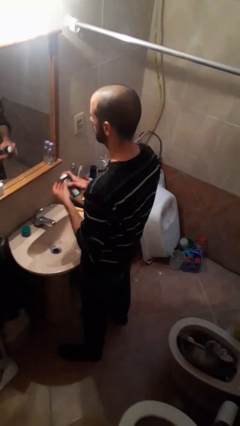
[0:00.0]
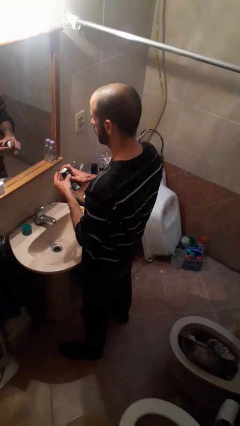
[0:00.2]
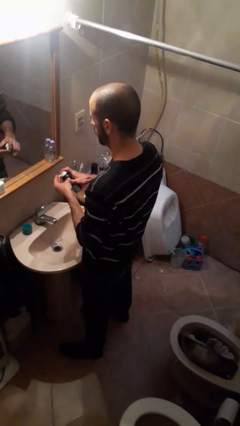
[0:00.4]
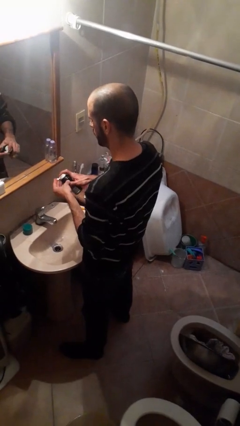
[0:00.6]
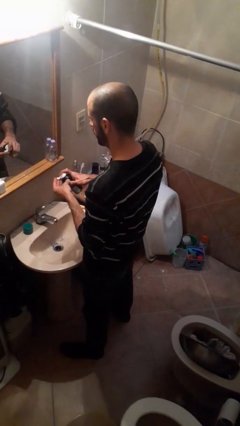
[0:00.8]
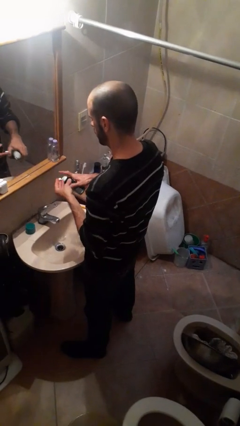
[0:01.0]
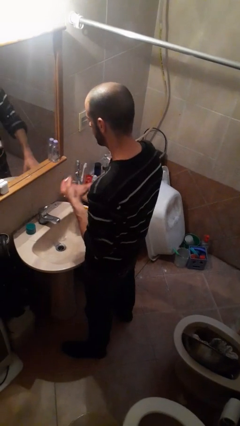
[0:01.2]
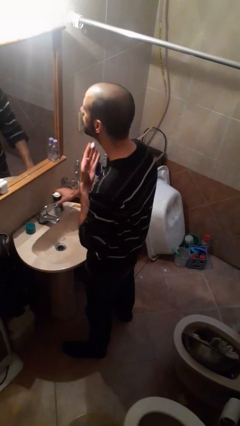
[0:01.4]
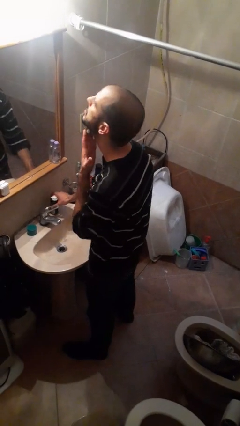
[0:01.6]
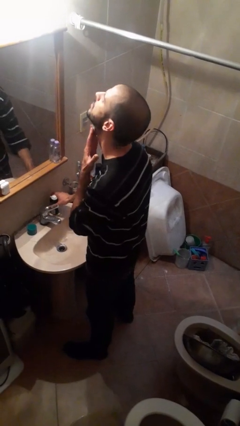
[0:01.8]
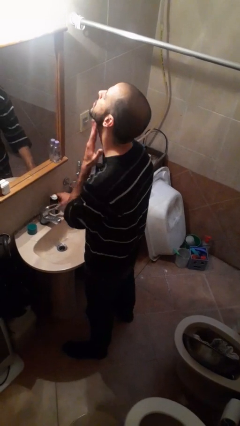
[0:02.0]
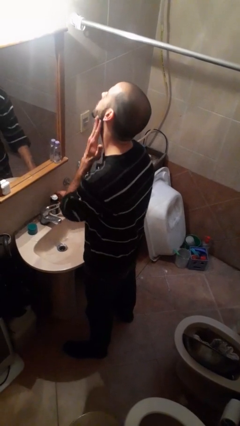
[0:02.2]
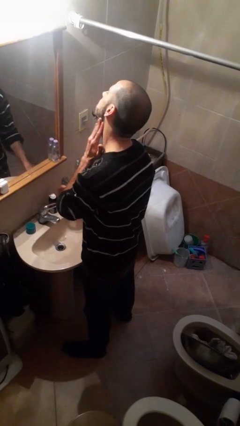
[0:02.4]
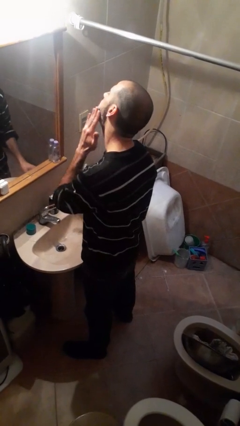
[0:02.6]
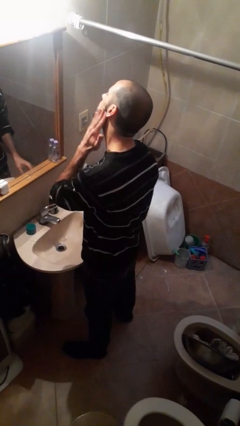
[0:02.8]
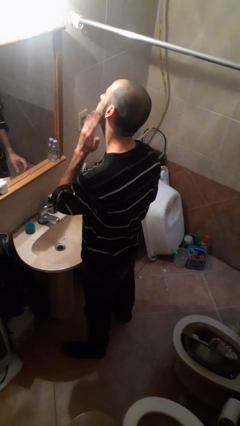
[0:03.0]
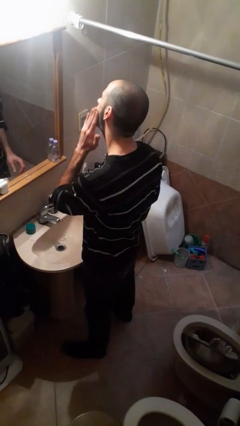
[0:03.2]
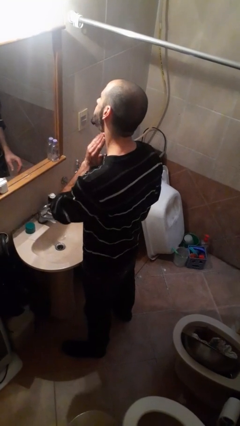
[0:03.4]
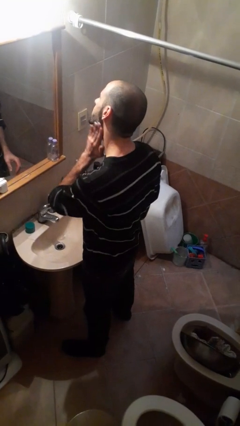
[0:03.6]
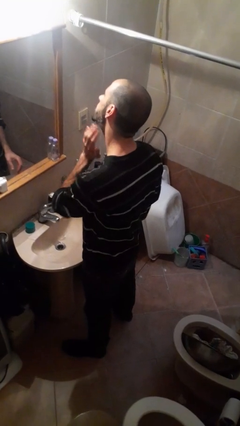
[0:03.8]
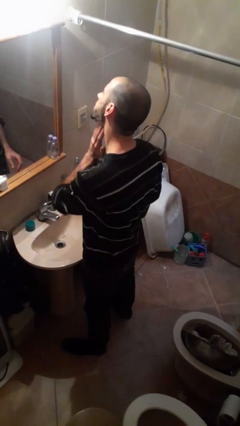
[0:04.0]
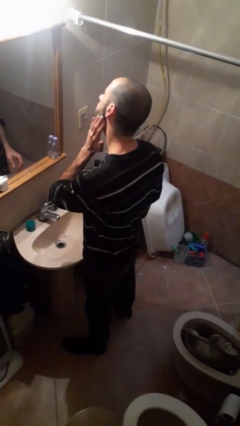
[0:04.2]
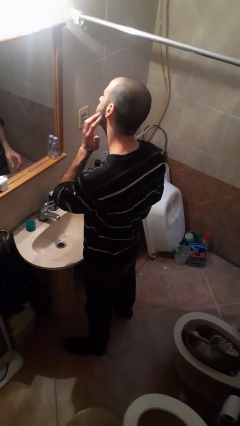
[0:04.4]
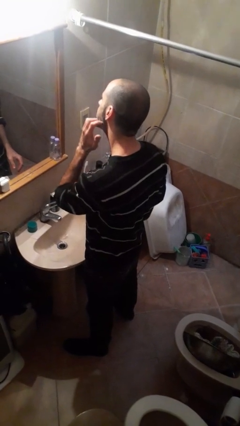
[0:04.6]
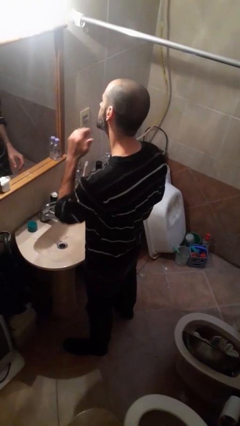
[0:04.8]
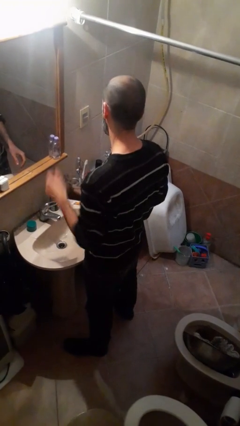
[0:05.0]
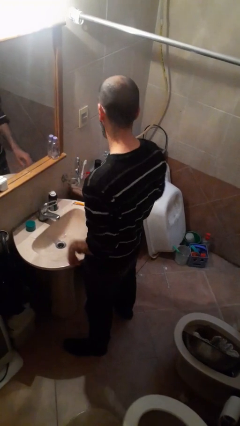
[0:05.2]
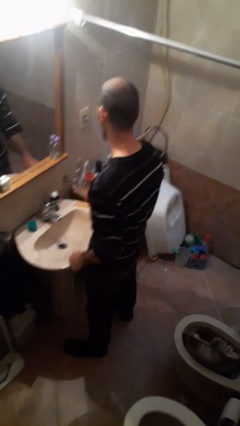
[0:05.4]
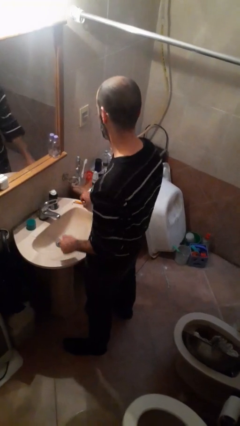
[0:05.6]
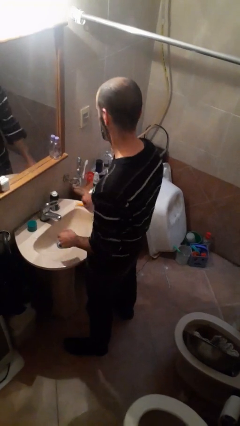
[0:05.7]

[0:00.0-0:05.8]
person applies shaving cream

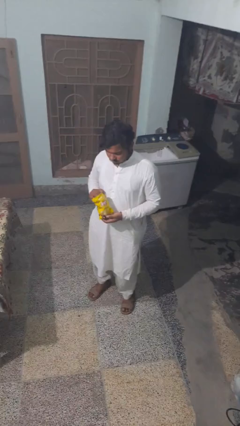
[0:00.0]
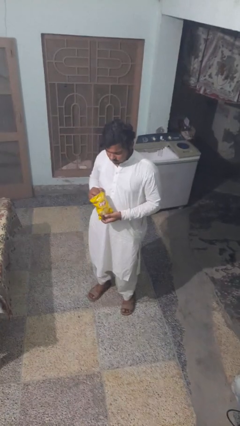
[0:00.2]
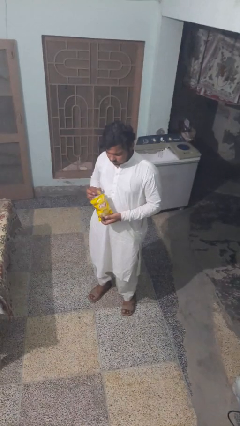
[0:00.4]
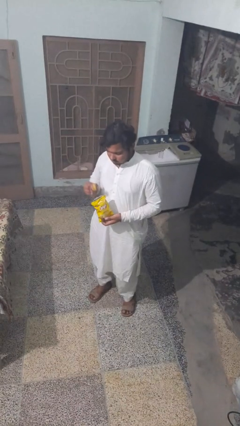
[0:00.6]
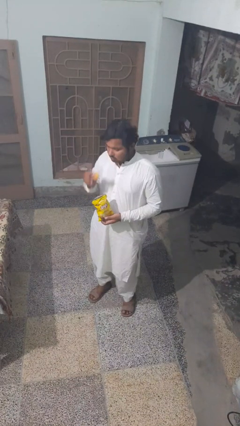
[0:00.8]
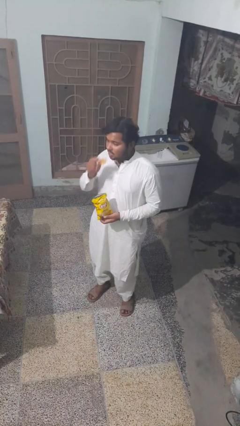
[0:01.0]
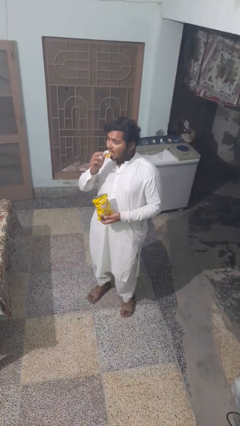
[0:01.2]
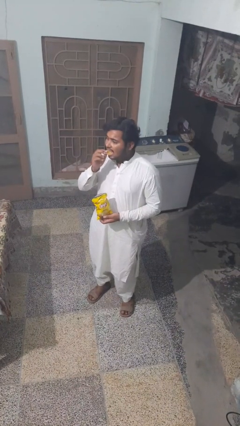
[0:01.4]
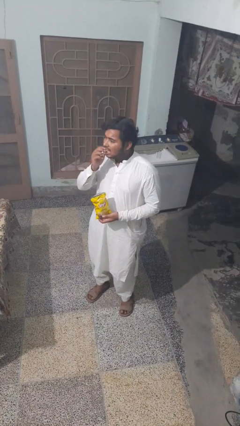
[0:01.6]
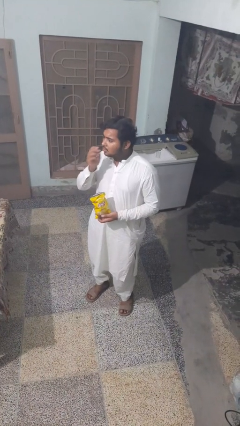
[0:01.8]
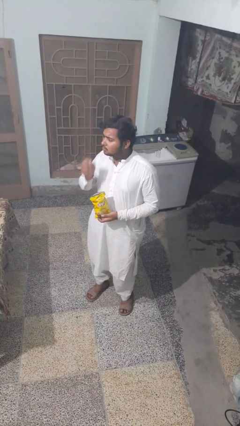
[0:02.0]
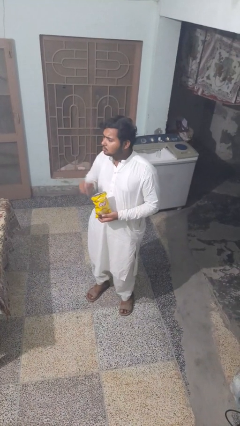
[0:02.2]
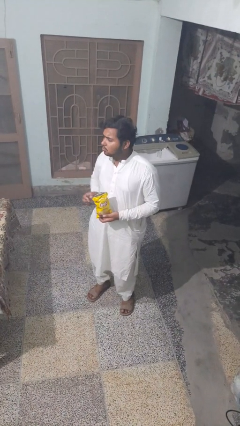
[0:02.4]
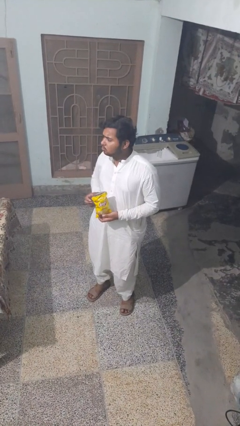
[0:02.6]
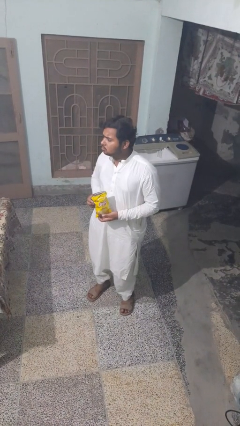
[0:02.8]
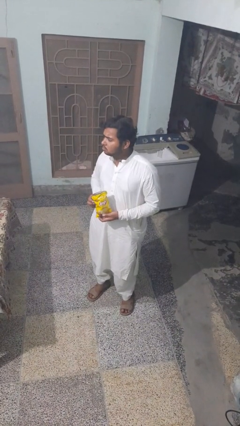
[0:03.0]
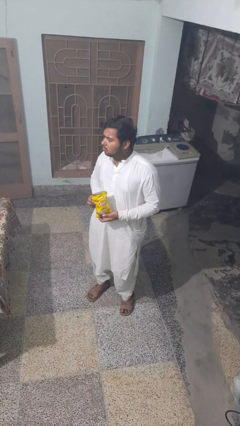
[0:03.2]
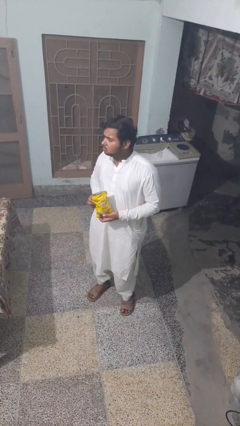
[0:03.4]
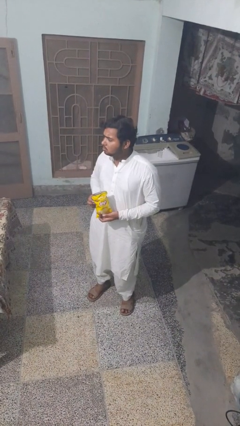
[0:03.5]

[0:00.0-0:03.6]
person eats snack from bag

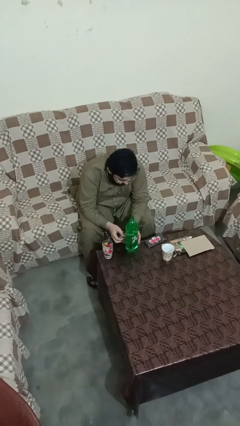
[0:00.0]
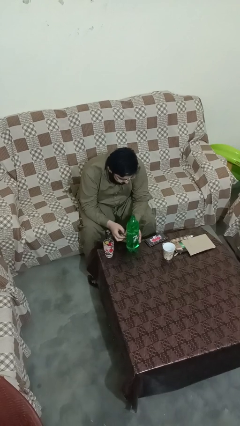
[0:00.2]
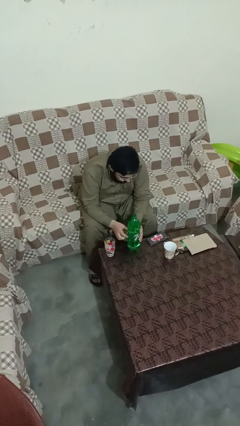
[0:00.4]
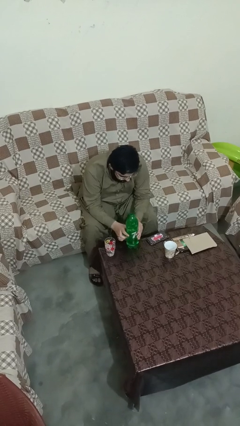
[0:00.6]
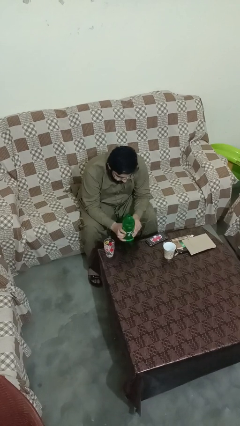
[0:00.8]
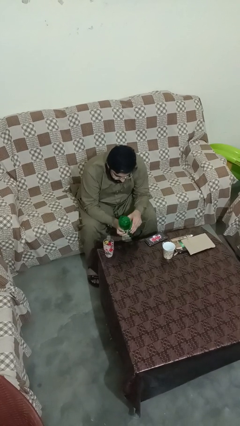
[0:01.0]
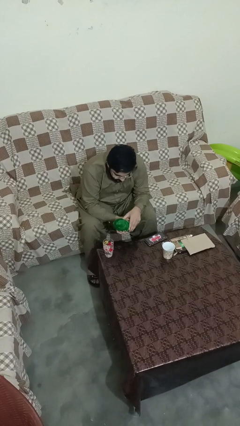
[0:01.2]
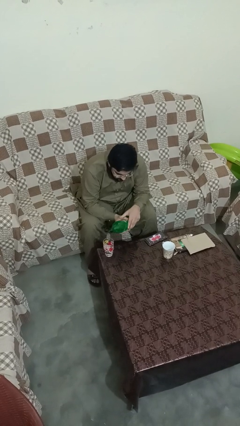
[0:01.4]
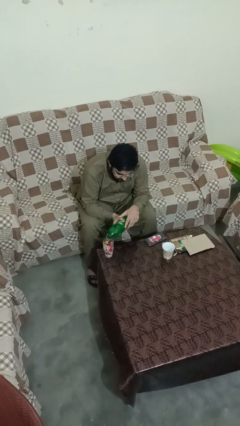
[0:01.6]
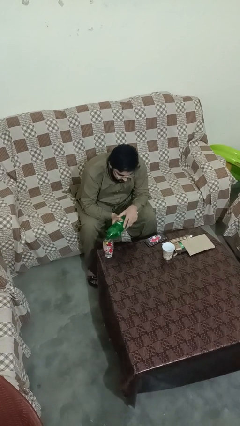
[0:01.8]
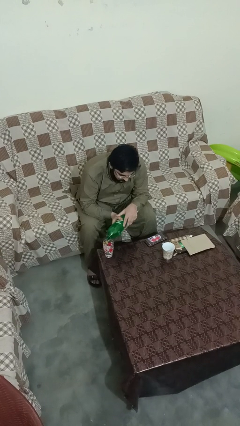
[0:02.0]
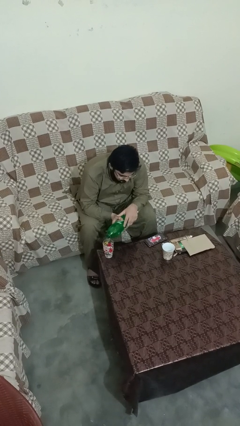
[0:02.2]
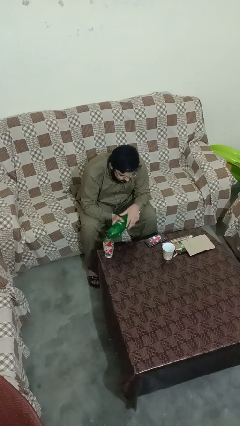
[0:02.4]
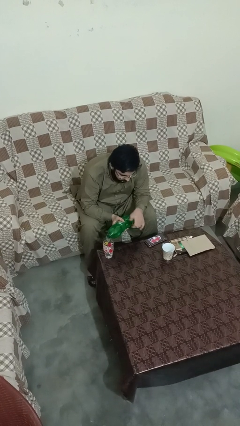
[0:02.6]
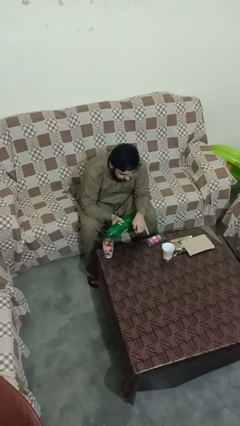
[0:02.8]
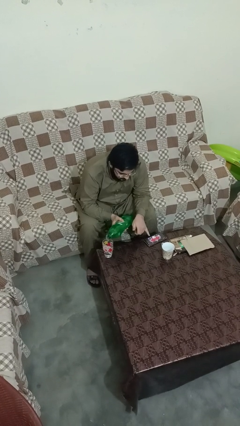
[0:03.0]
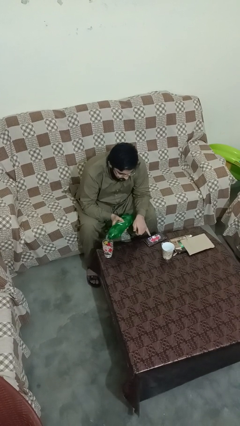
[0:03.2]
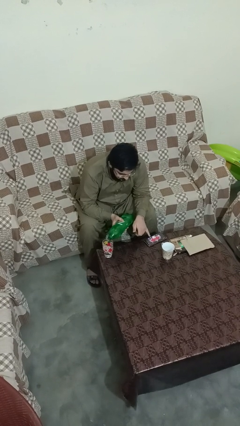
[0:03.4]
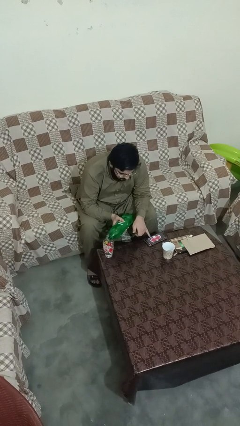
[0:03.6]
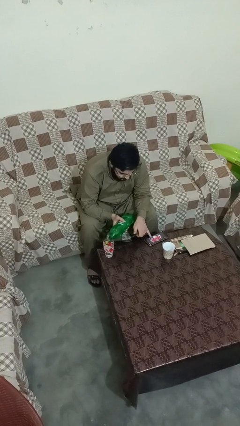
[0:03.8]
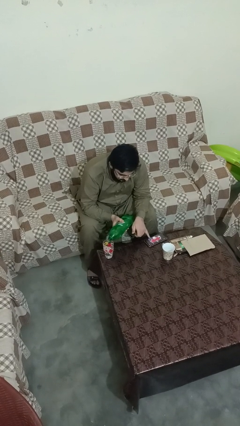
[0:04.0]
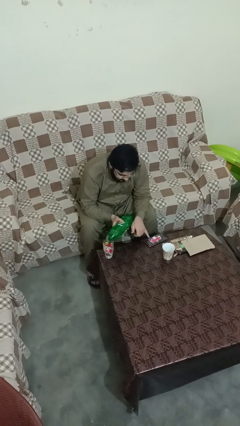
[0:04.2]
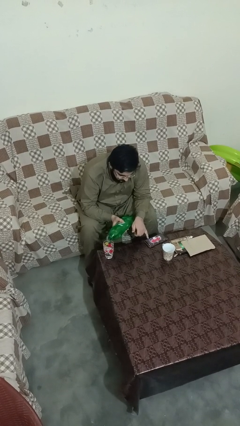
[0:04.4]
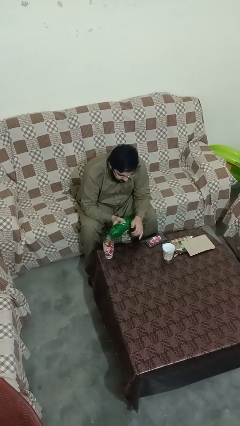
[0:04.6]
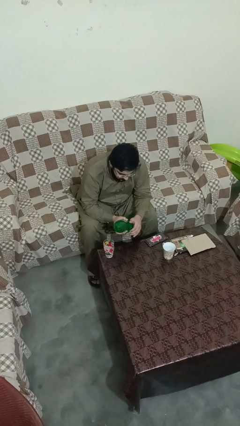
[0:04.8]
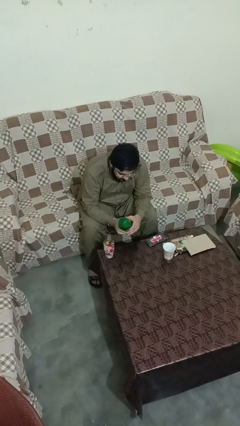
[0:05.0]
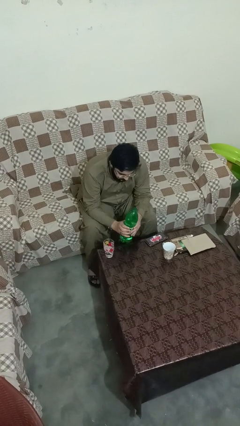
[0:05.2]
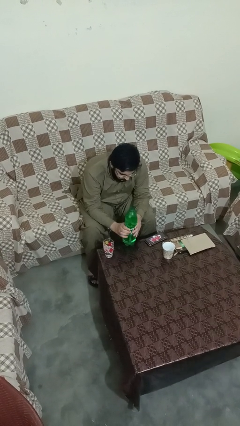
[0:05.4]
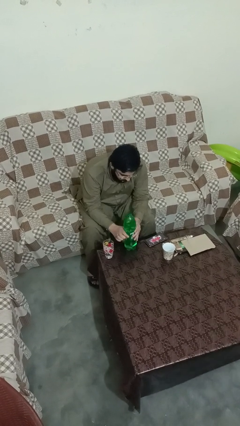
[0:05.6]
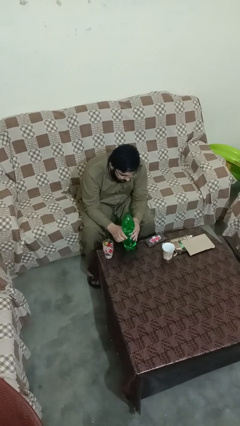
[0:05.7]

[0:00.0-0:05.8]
person pours liquid into cup

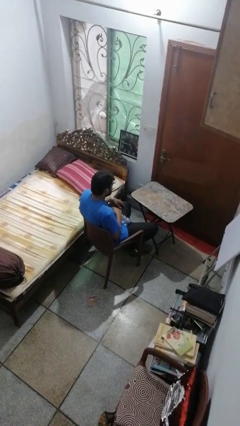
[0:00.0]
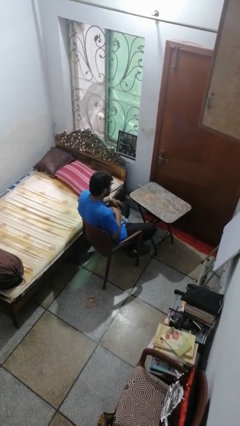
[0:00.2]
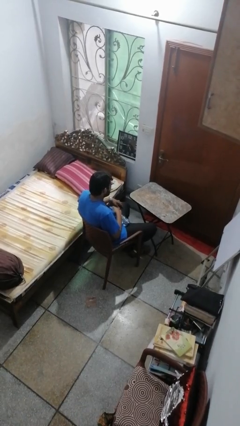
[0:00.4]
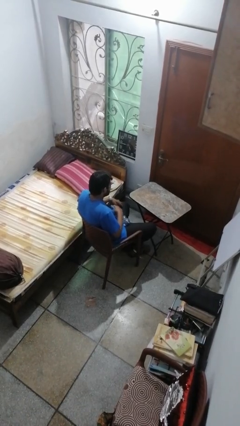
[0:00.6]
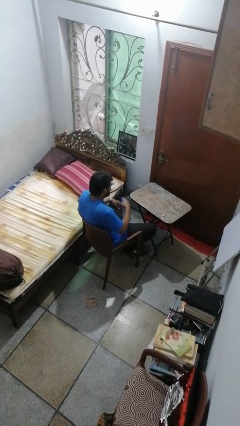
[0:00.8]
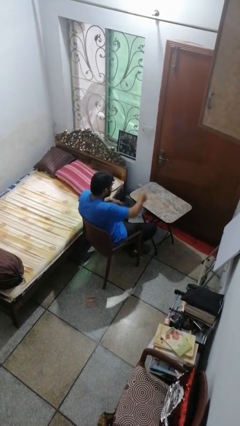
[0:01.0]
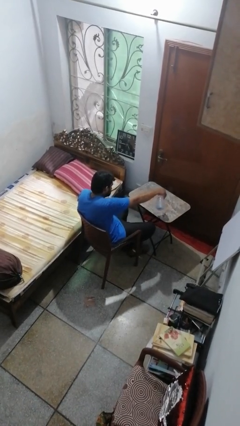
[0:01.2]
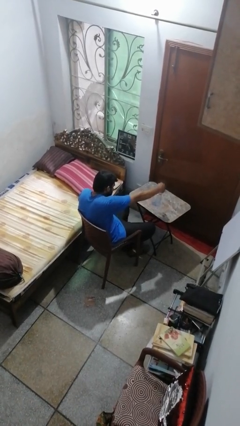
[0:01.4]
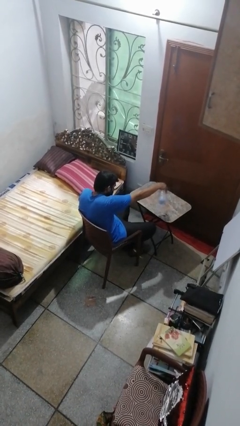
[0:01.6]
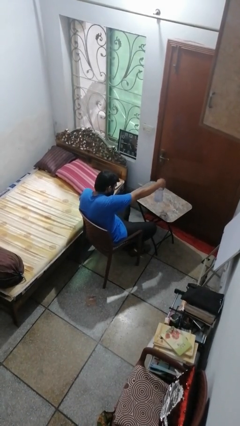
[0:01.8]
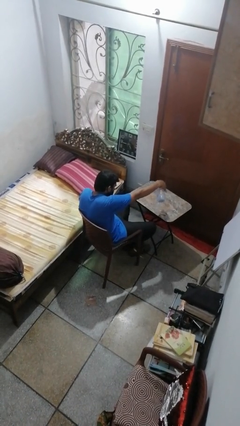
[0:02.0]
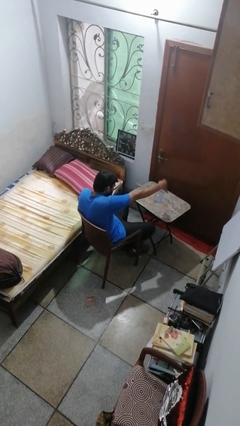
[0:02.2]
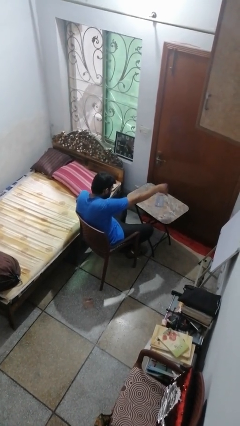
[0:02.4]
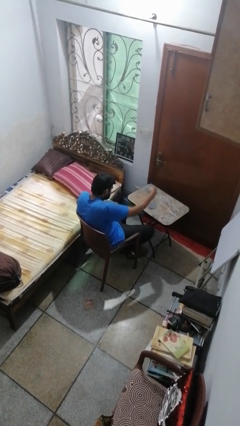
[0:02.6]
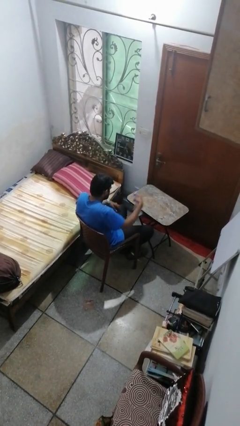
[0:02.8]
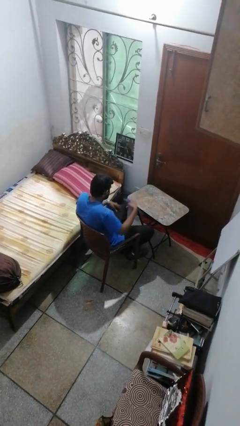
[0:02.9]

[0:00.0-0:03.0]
person sprays from bottle
